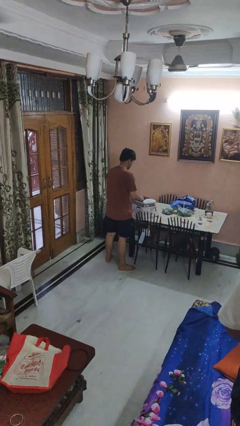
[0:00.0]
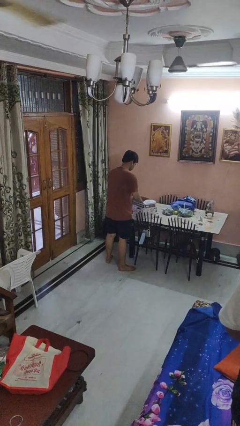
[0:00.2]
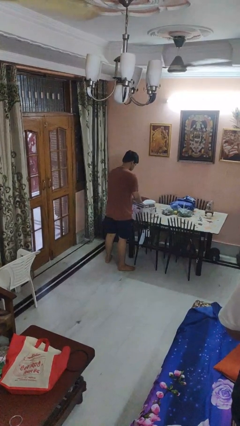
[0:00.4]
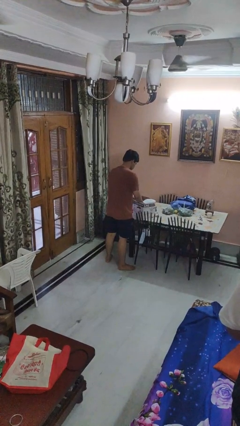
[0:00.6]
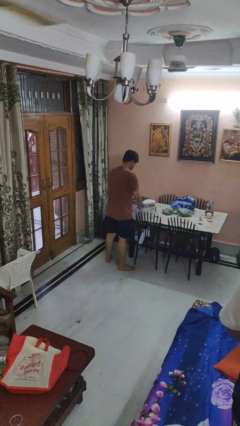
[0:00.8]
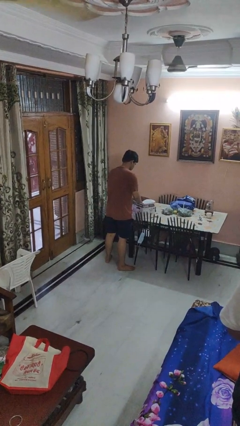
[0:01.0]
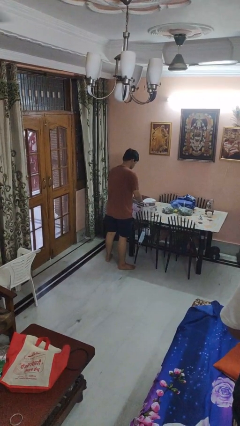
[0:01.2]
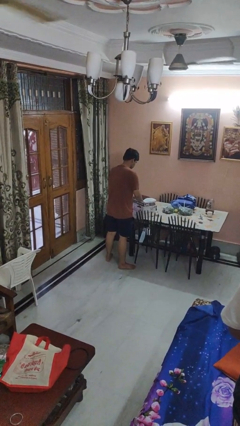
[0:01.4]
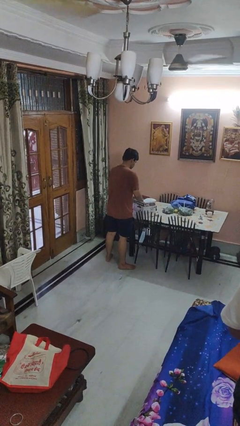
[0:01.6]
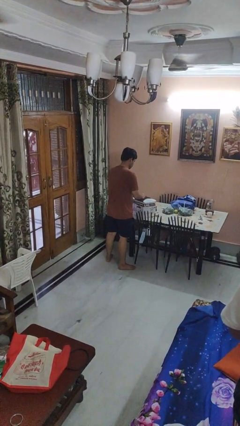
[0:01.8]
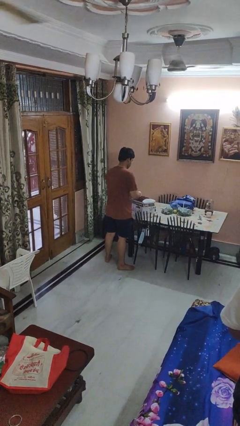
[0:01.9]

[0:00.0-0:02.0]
person searches in box

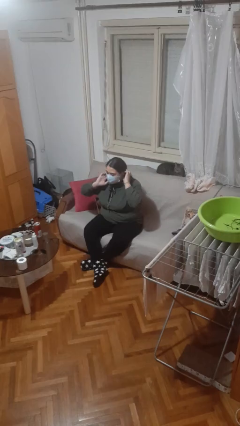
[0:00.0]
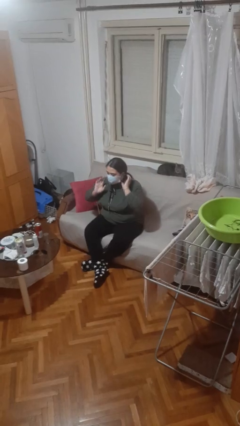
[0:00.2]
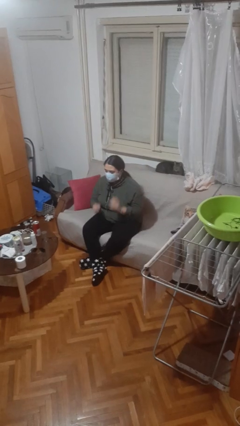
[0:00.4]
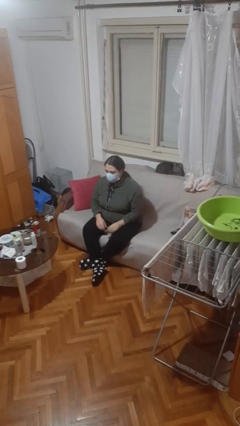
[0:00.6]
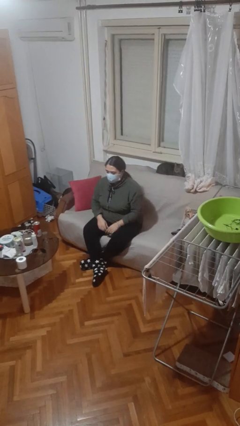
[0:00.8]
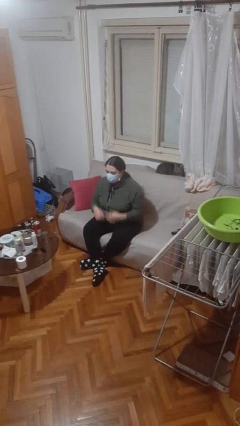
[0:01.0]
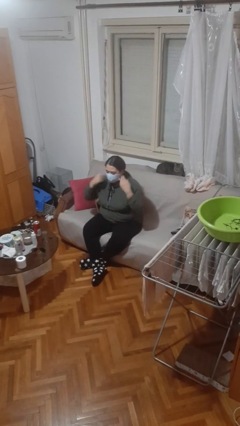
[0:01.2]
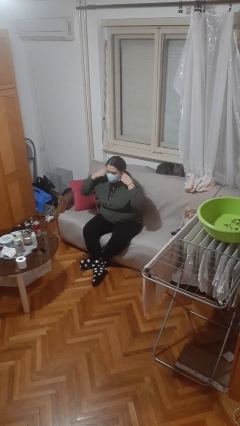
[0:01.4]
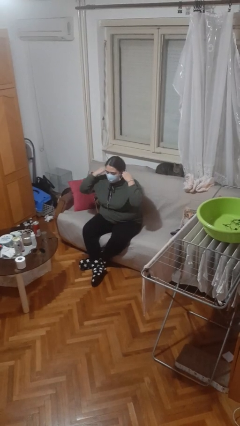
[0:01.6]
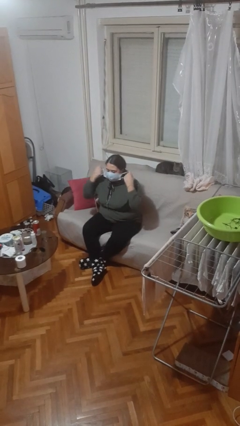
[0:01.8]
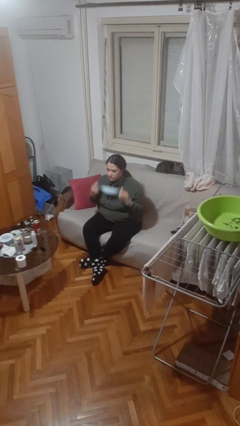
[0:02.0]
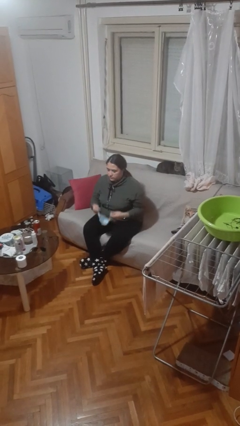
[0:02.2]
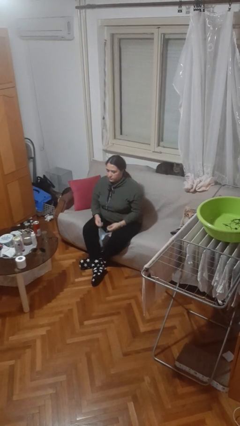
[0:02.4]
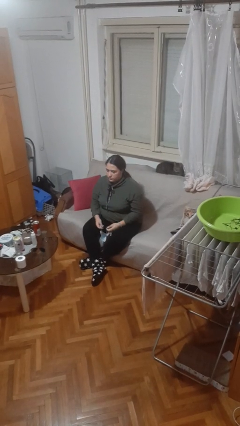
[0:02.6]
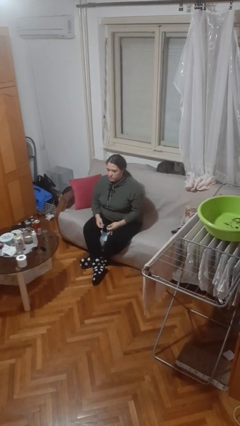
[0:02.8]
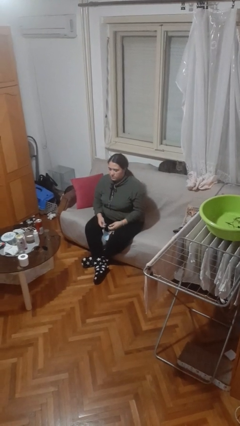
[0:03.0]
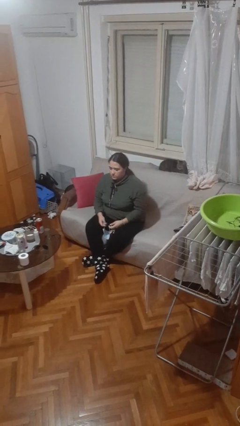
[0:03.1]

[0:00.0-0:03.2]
person takes off facemask

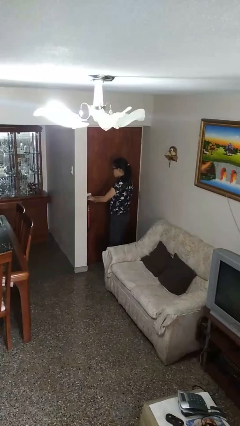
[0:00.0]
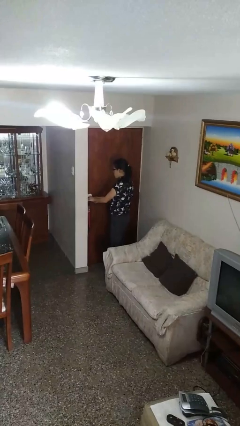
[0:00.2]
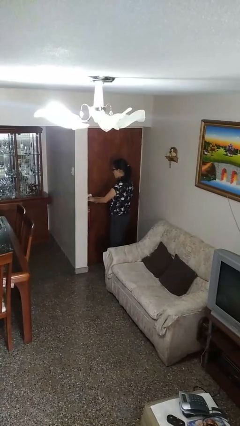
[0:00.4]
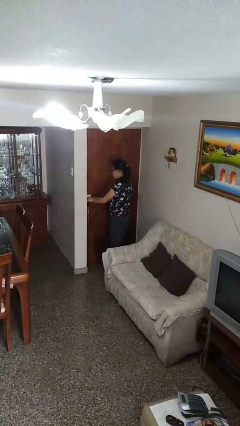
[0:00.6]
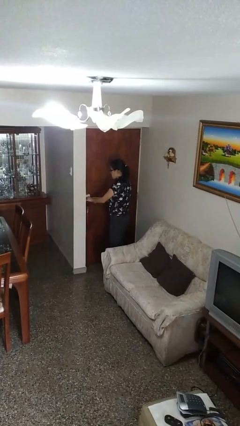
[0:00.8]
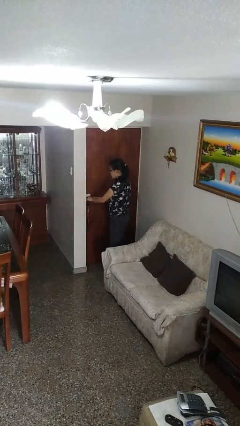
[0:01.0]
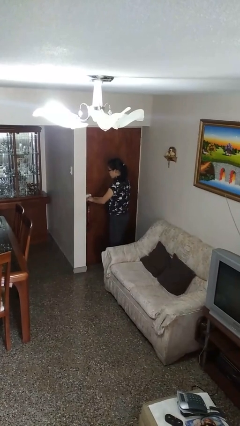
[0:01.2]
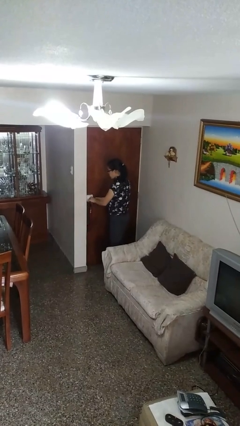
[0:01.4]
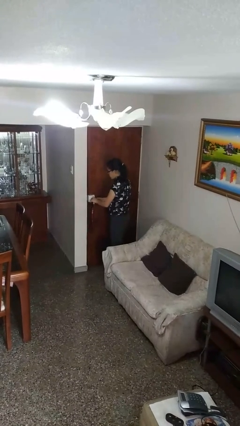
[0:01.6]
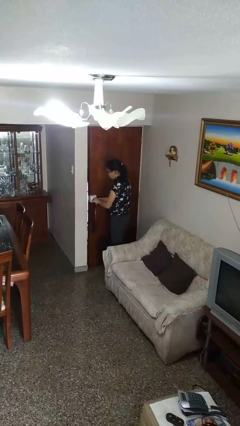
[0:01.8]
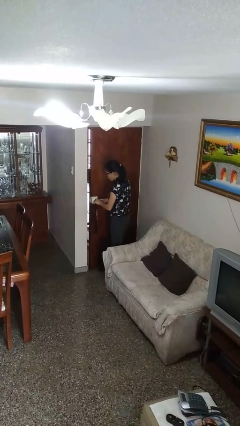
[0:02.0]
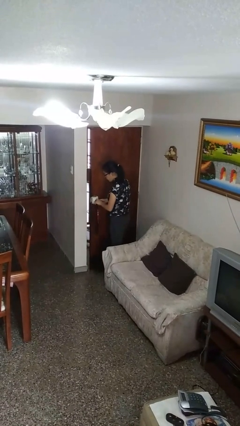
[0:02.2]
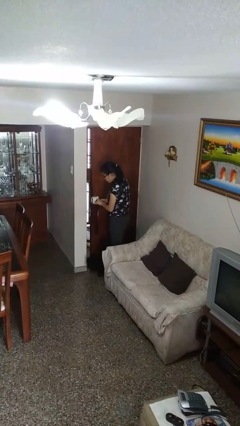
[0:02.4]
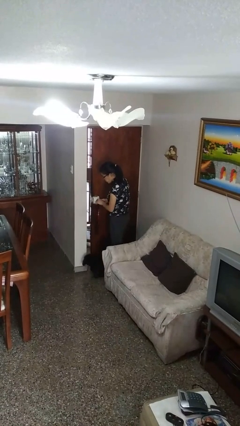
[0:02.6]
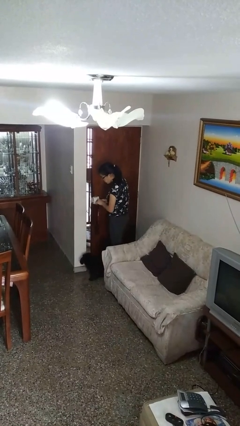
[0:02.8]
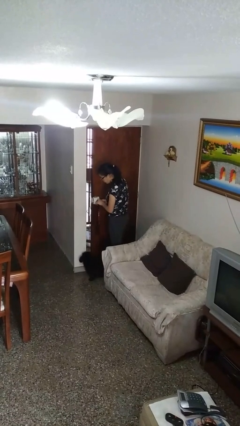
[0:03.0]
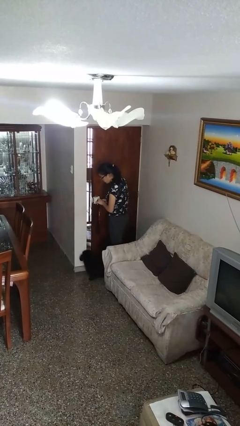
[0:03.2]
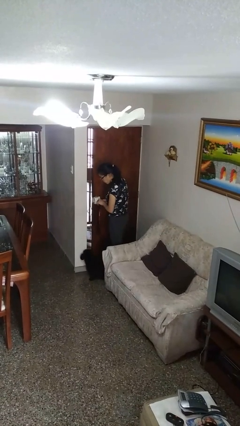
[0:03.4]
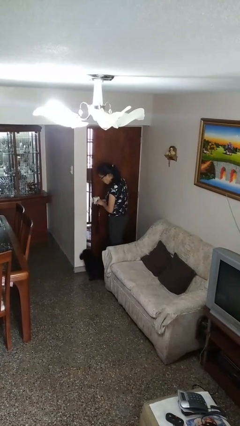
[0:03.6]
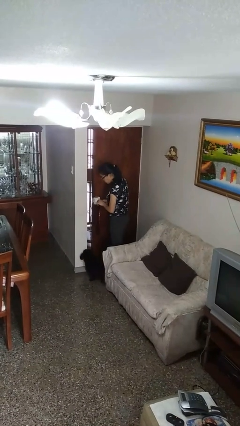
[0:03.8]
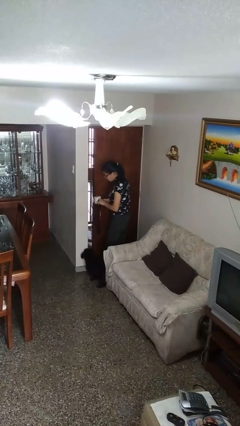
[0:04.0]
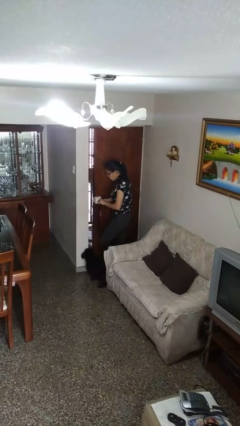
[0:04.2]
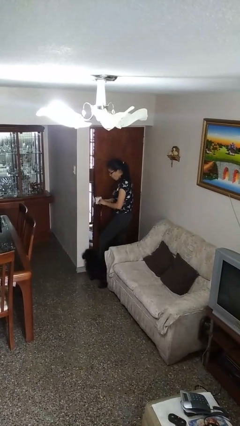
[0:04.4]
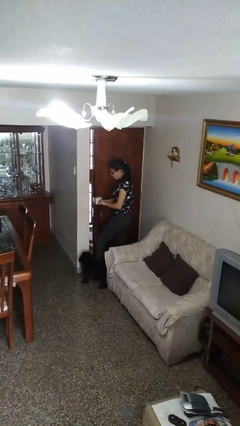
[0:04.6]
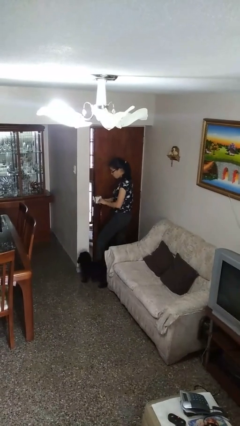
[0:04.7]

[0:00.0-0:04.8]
person opens facility door

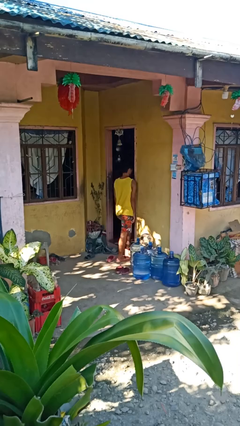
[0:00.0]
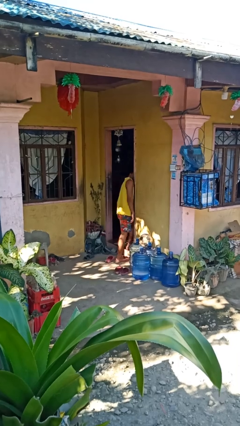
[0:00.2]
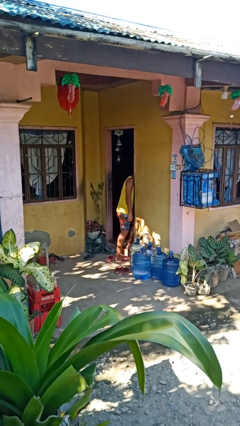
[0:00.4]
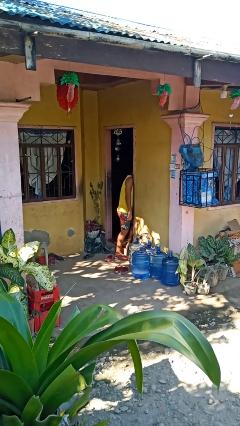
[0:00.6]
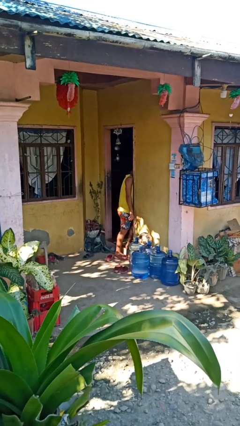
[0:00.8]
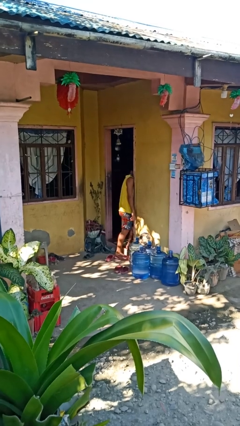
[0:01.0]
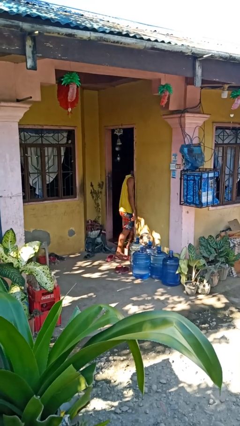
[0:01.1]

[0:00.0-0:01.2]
person bumps into wall

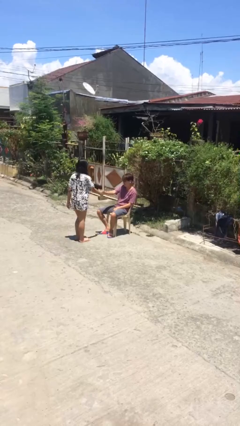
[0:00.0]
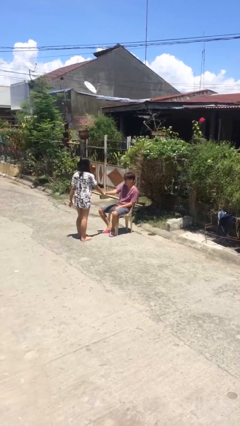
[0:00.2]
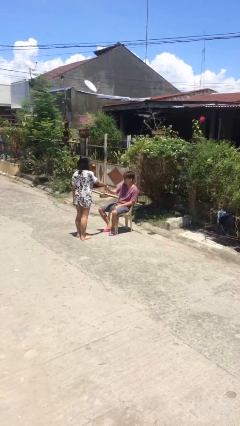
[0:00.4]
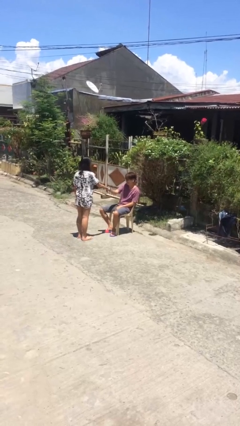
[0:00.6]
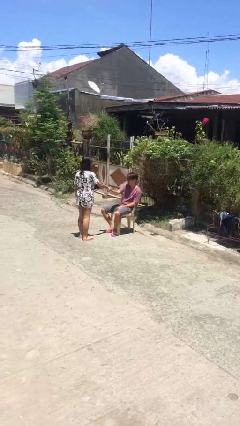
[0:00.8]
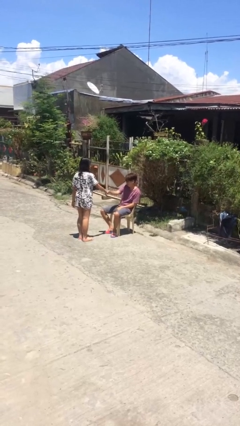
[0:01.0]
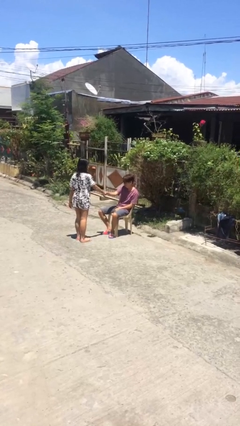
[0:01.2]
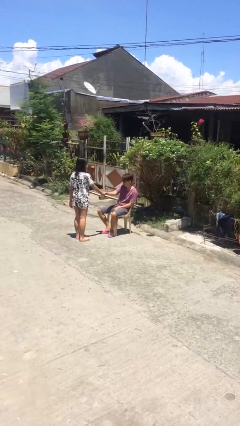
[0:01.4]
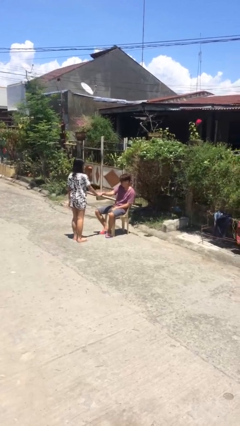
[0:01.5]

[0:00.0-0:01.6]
person shakes hand

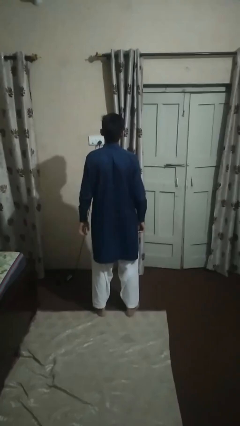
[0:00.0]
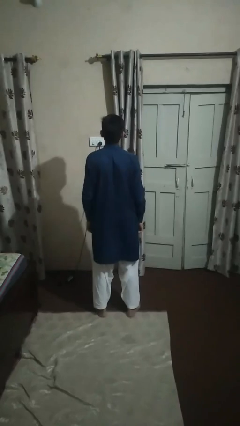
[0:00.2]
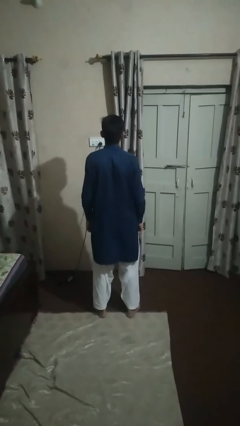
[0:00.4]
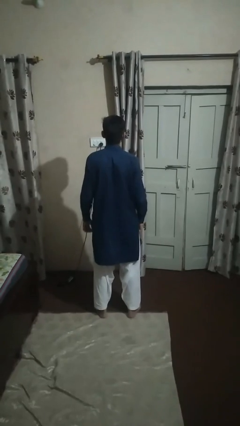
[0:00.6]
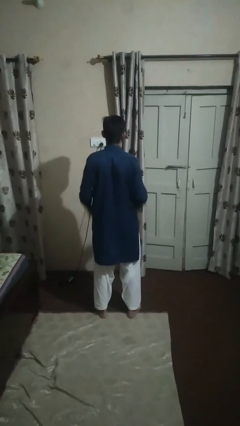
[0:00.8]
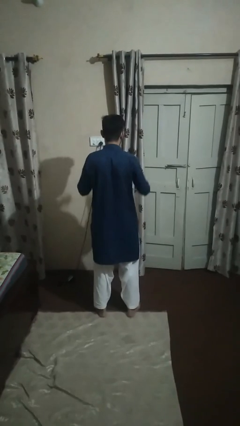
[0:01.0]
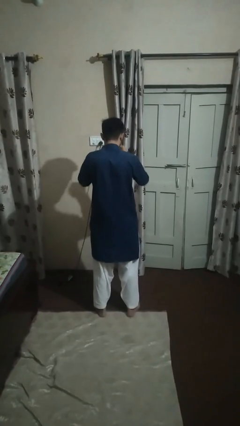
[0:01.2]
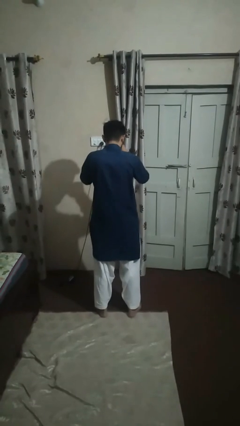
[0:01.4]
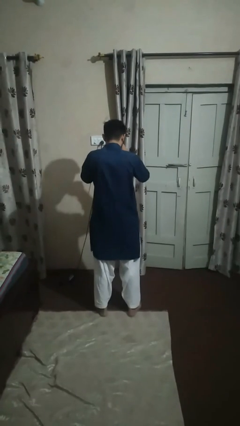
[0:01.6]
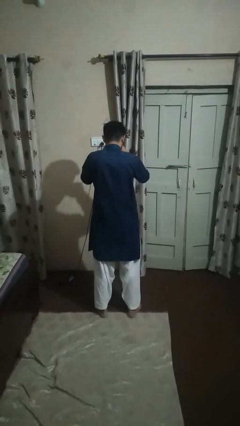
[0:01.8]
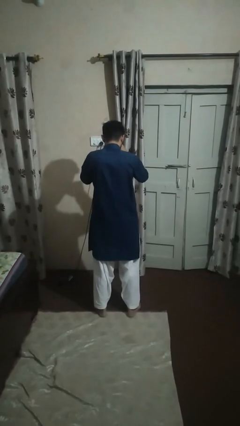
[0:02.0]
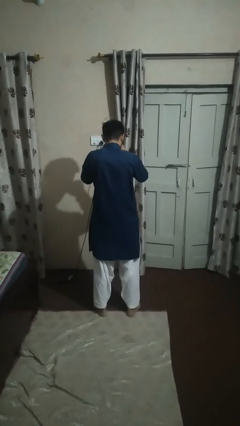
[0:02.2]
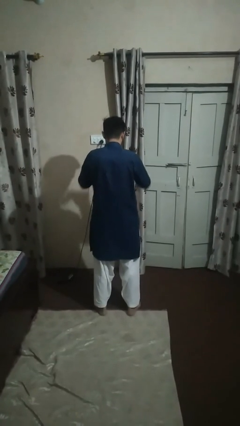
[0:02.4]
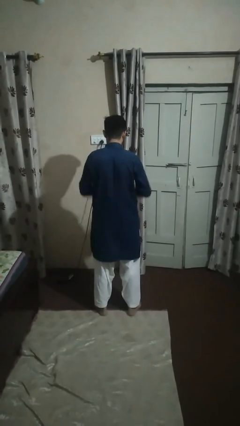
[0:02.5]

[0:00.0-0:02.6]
person rubs eyes

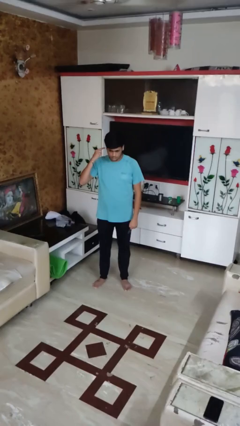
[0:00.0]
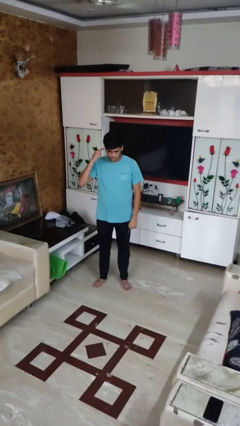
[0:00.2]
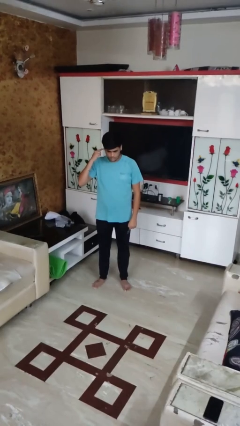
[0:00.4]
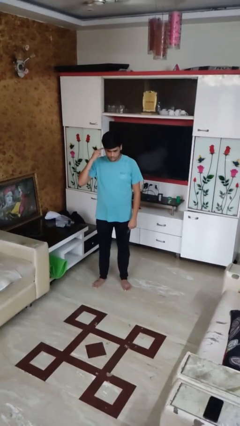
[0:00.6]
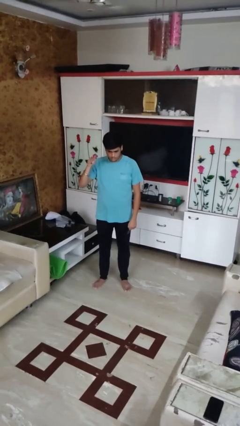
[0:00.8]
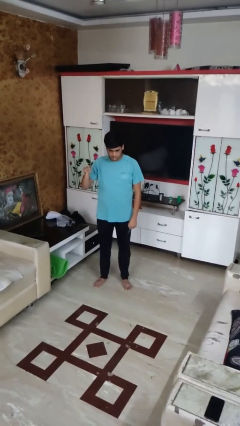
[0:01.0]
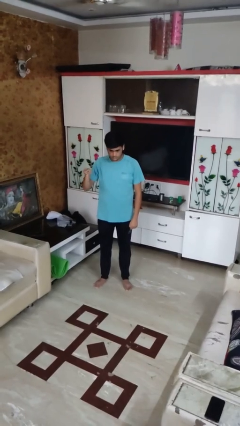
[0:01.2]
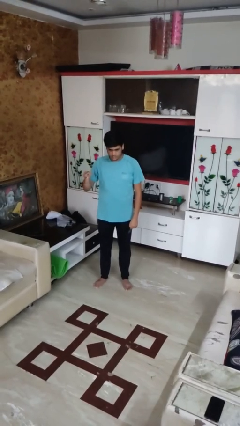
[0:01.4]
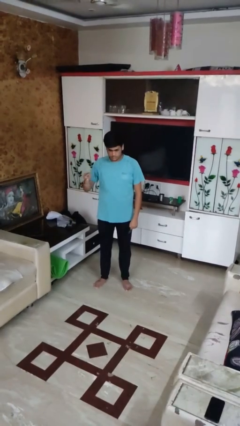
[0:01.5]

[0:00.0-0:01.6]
person gestures listen closely

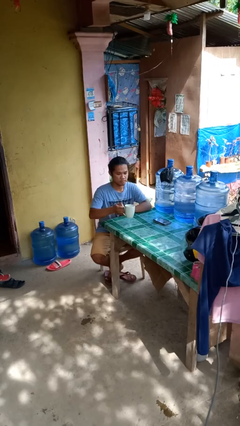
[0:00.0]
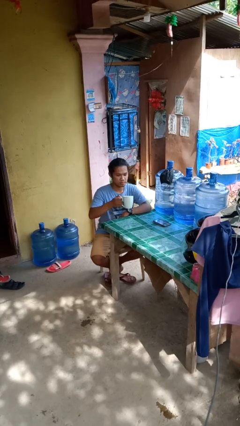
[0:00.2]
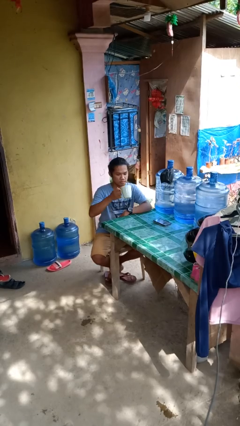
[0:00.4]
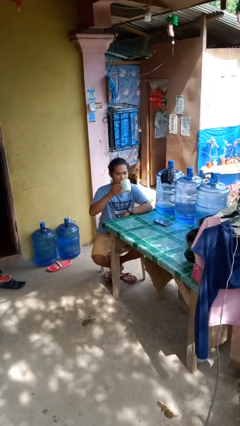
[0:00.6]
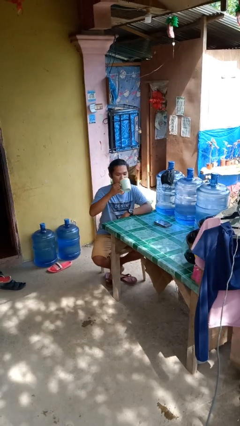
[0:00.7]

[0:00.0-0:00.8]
person picks up object from table
